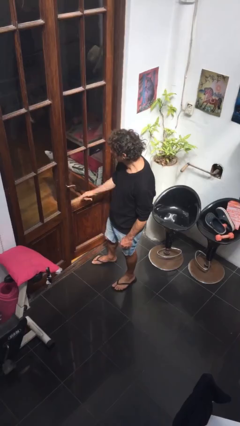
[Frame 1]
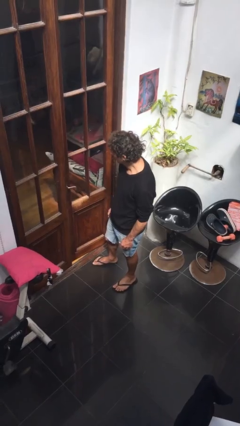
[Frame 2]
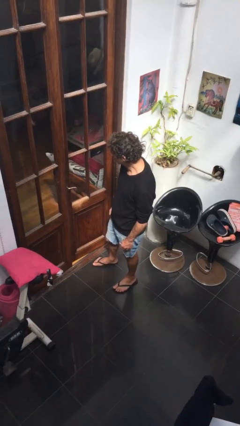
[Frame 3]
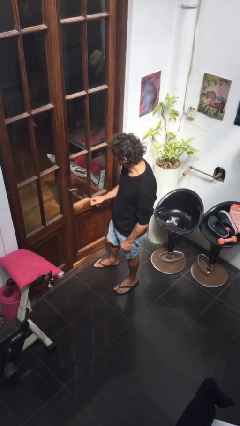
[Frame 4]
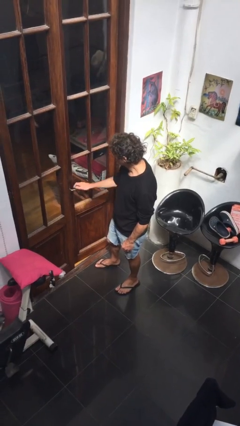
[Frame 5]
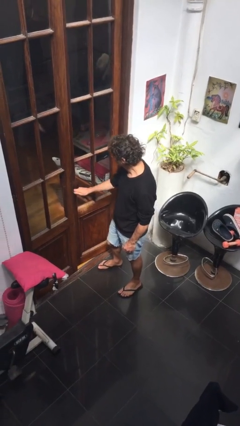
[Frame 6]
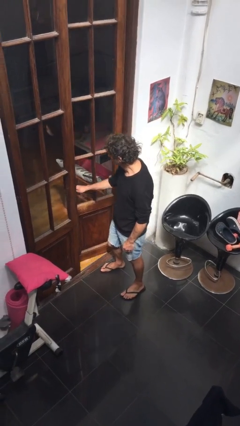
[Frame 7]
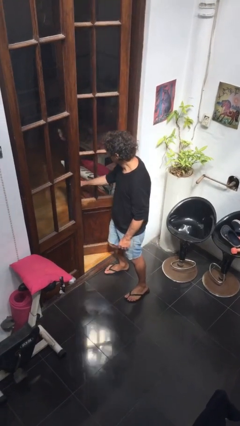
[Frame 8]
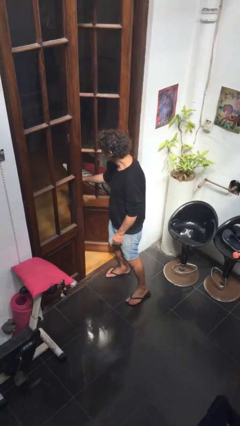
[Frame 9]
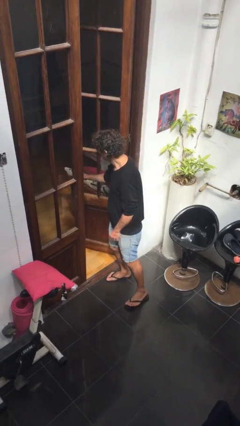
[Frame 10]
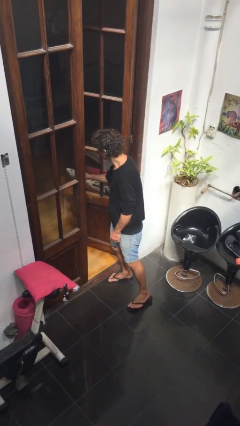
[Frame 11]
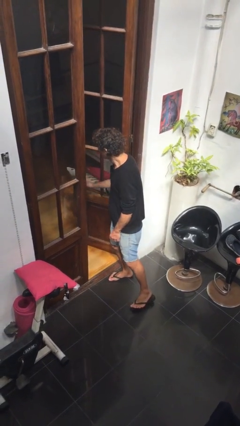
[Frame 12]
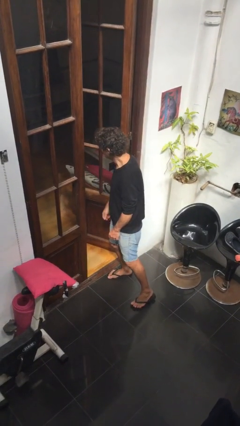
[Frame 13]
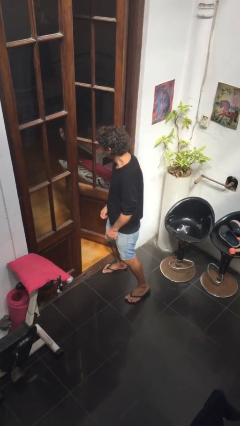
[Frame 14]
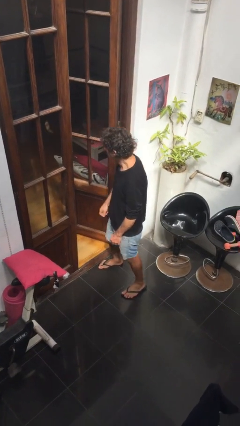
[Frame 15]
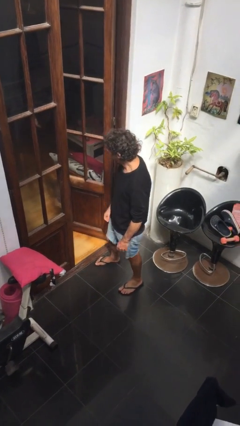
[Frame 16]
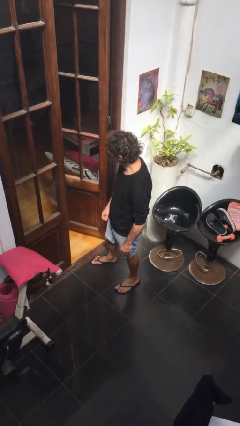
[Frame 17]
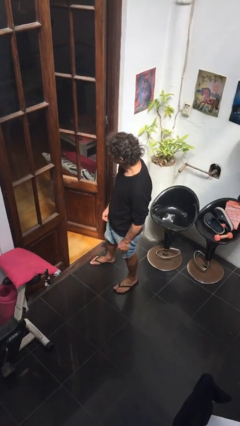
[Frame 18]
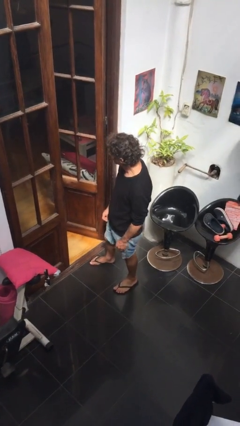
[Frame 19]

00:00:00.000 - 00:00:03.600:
person opens facility door

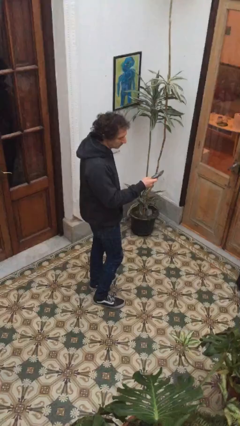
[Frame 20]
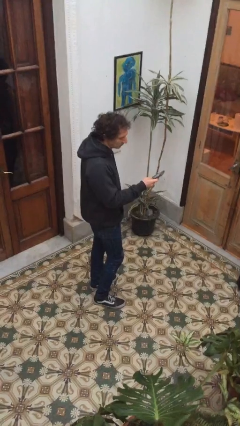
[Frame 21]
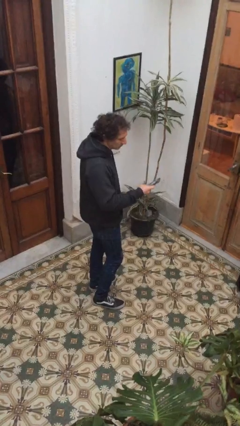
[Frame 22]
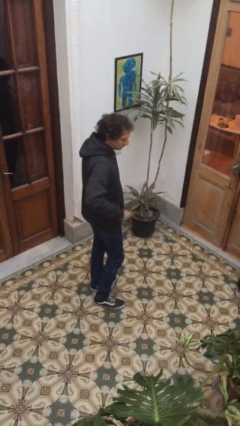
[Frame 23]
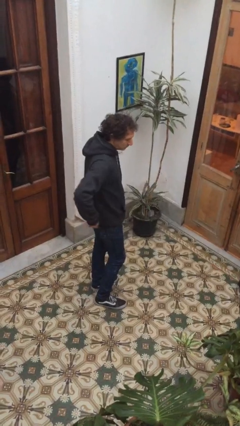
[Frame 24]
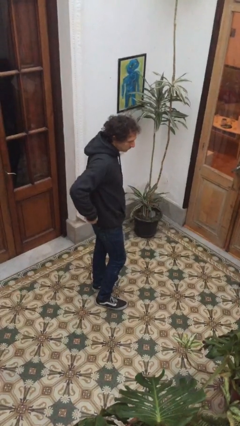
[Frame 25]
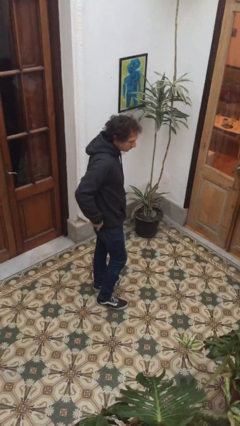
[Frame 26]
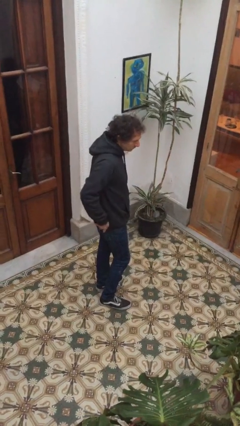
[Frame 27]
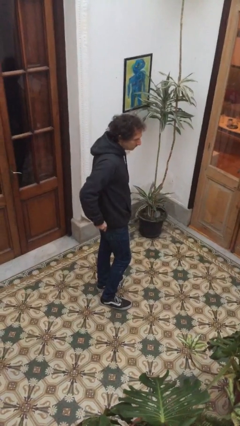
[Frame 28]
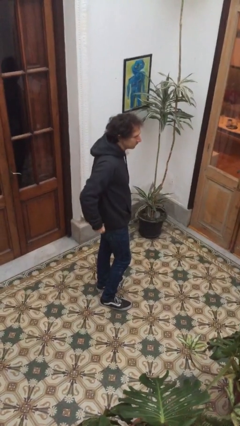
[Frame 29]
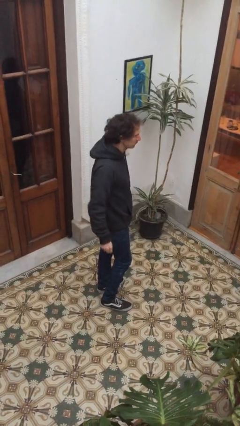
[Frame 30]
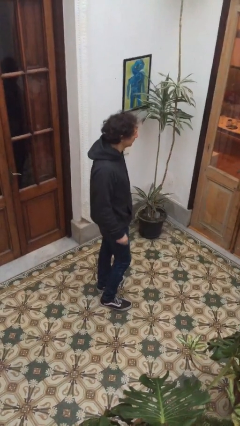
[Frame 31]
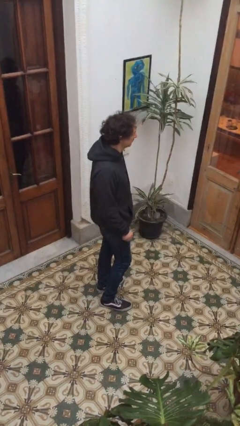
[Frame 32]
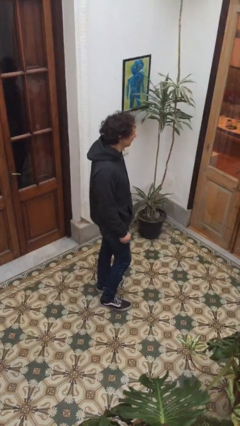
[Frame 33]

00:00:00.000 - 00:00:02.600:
person puts phone into pocket

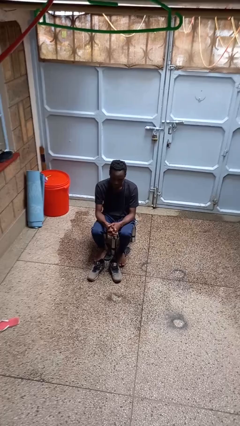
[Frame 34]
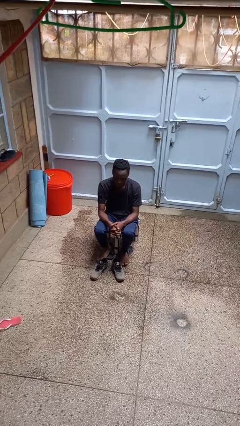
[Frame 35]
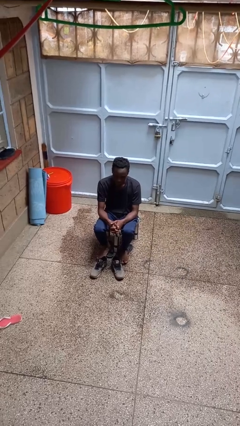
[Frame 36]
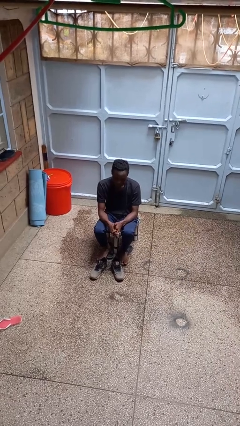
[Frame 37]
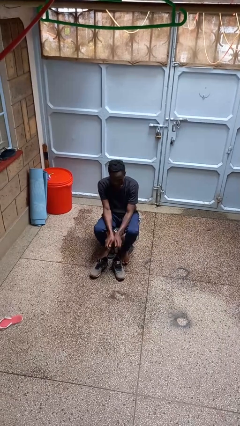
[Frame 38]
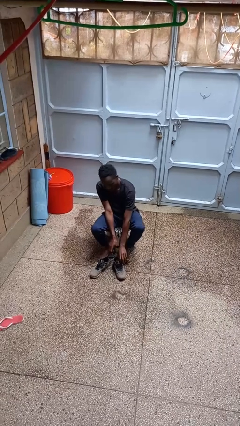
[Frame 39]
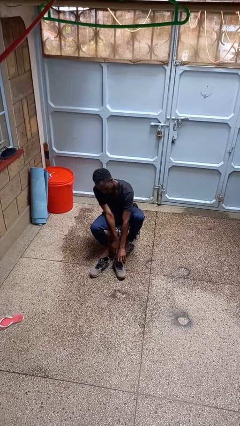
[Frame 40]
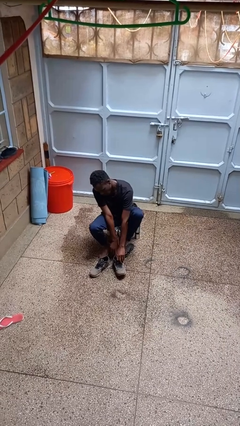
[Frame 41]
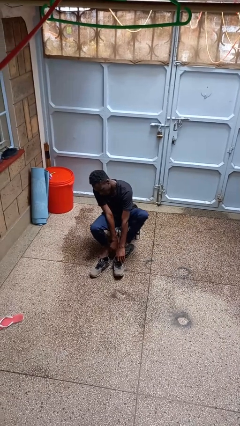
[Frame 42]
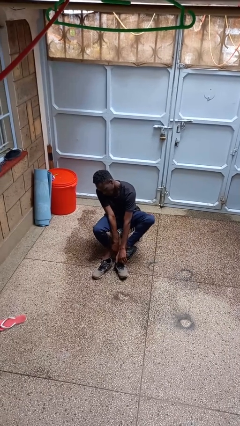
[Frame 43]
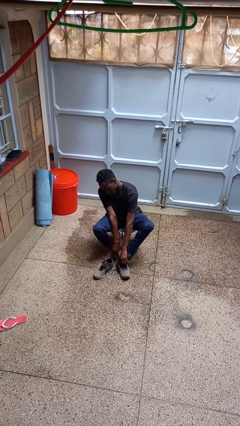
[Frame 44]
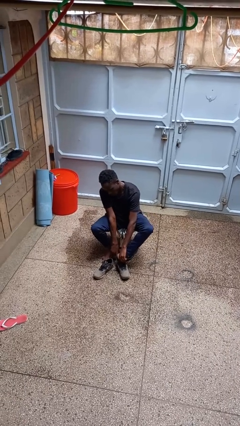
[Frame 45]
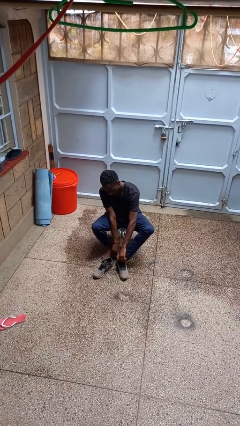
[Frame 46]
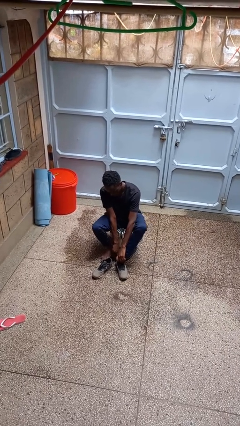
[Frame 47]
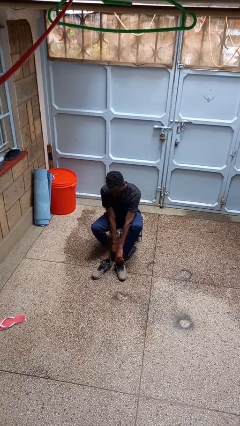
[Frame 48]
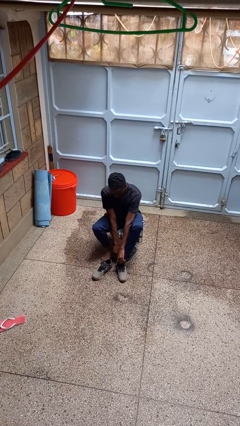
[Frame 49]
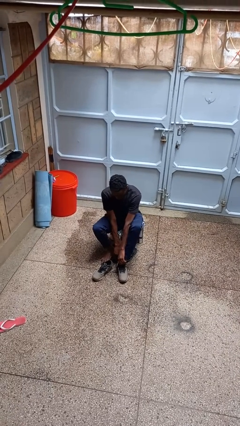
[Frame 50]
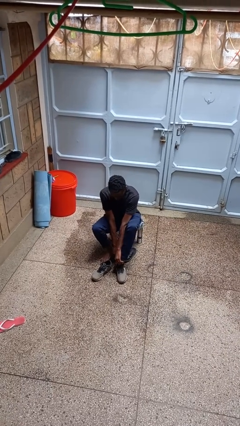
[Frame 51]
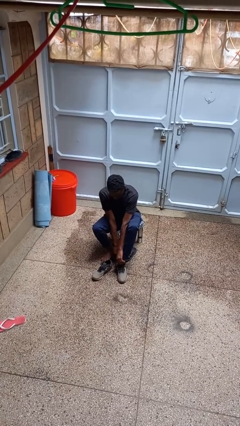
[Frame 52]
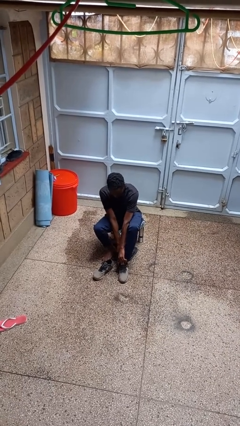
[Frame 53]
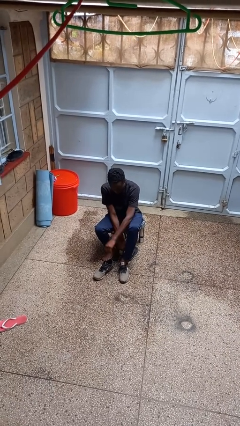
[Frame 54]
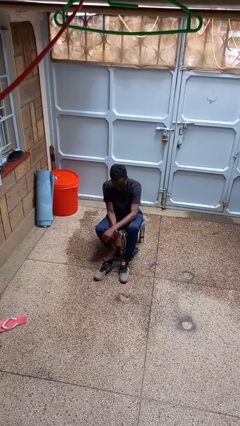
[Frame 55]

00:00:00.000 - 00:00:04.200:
person puts on shoes

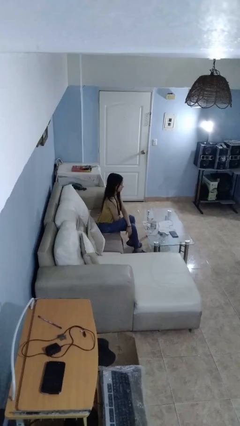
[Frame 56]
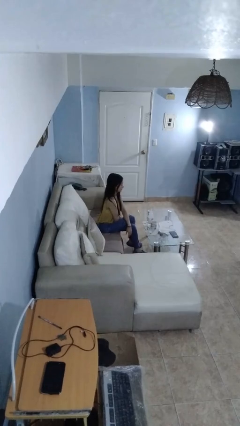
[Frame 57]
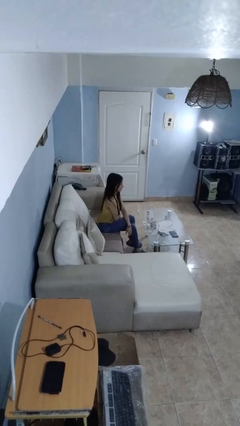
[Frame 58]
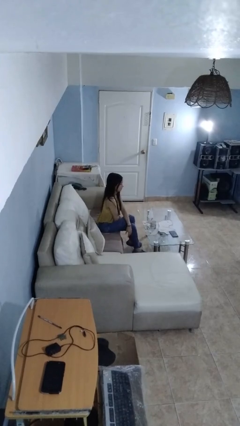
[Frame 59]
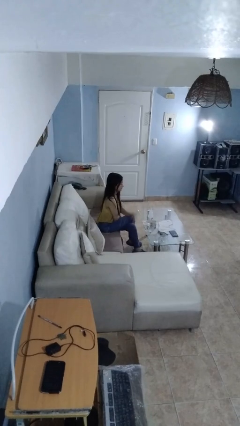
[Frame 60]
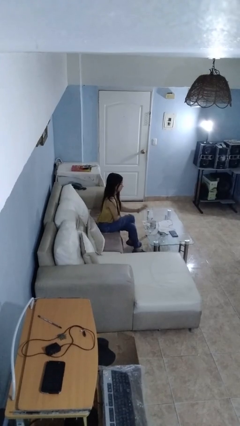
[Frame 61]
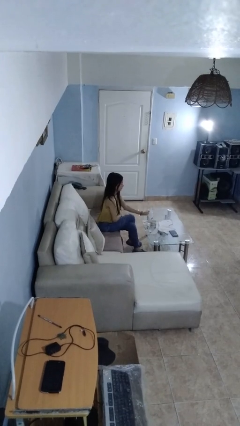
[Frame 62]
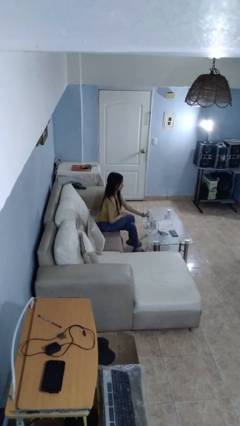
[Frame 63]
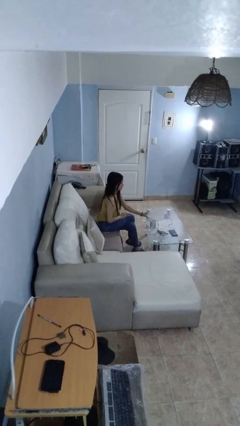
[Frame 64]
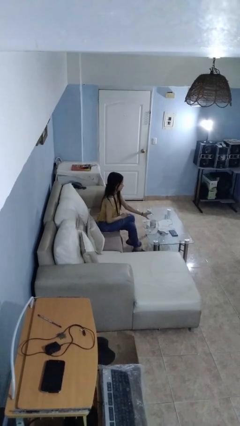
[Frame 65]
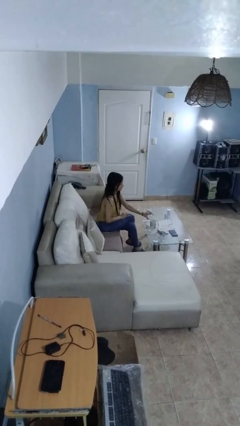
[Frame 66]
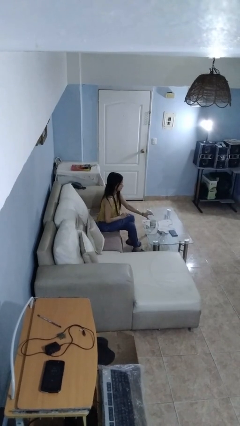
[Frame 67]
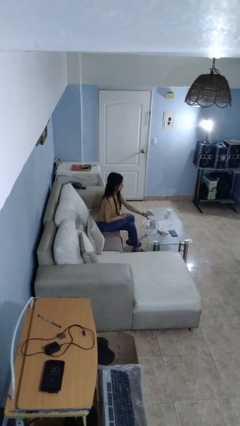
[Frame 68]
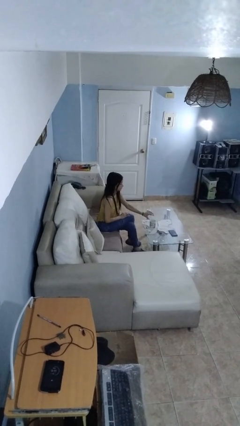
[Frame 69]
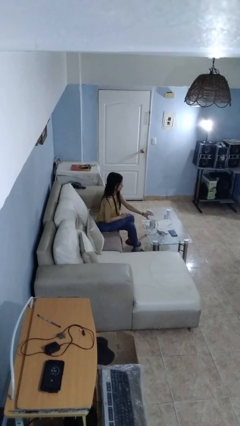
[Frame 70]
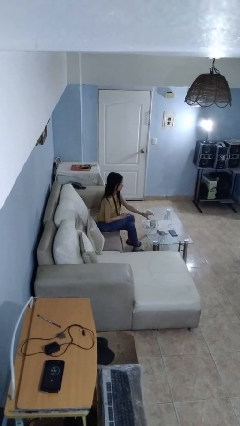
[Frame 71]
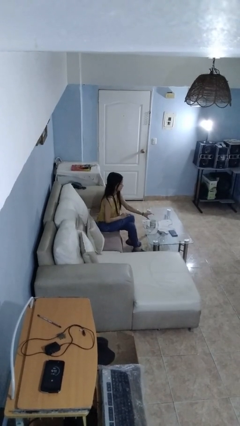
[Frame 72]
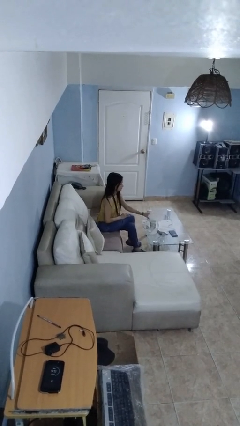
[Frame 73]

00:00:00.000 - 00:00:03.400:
person pours liquid into cup

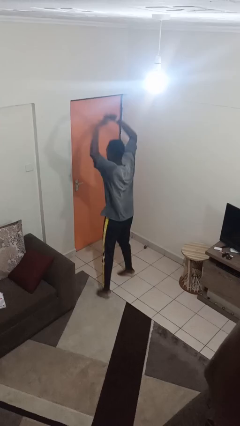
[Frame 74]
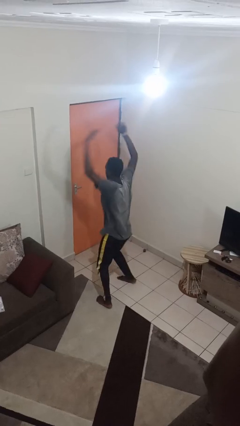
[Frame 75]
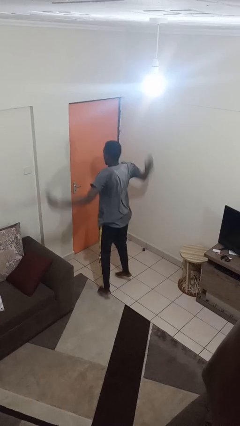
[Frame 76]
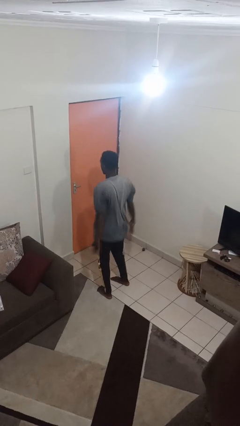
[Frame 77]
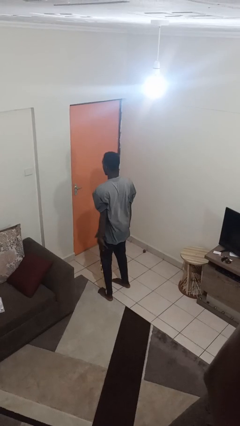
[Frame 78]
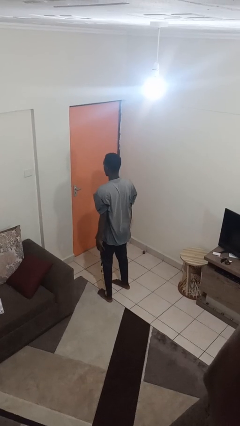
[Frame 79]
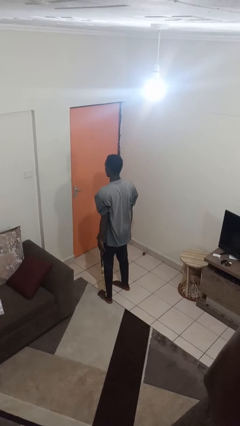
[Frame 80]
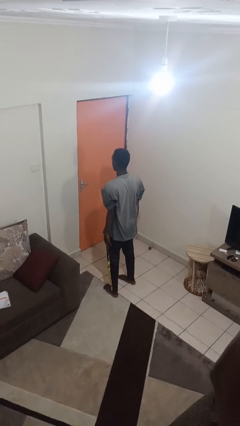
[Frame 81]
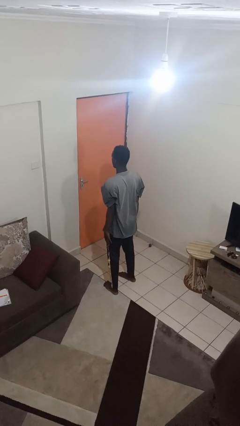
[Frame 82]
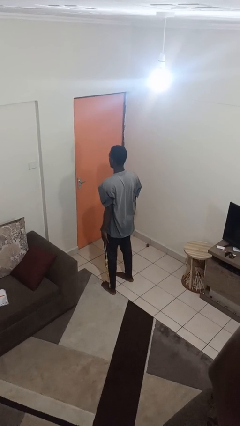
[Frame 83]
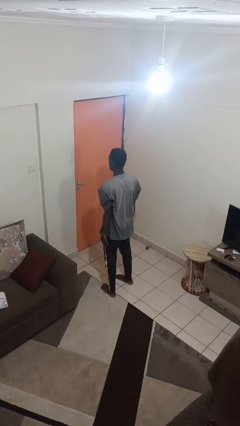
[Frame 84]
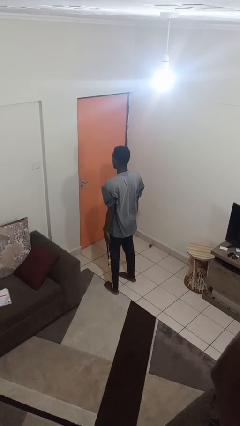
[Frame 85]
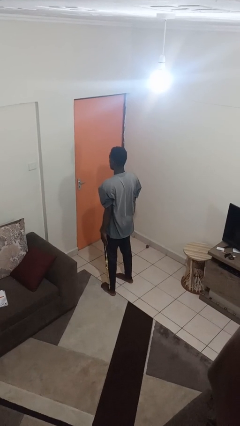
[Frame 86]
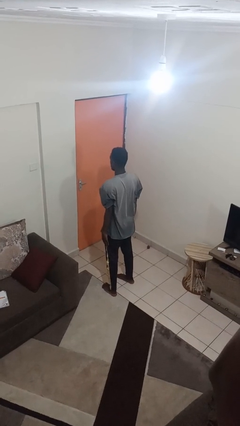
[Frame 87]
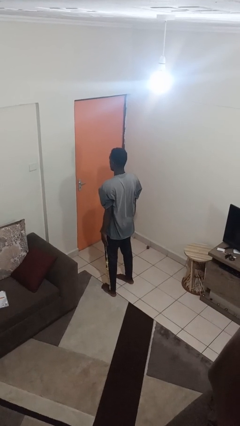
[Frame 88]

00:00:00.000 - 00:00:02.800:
person exercises with jumping jacks

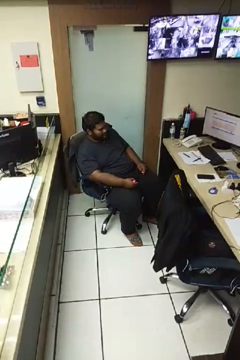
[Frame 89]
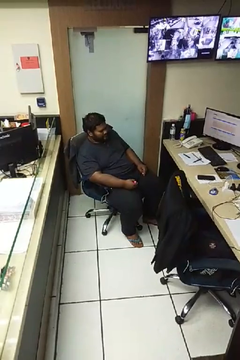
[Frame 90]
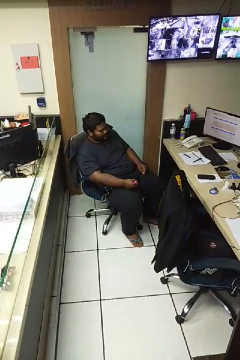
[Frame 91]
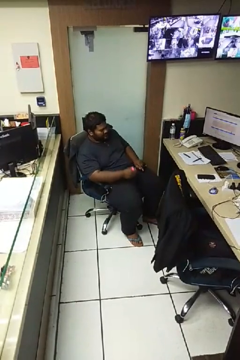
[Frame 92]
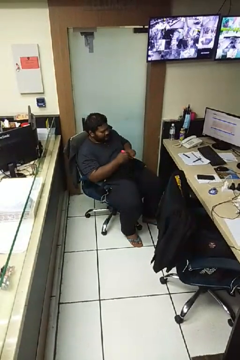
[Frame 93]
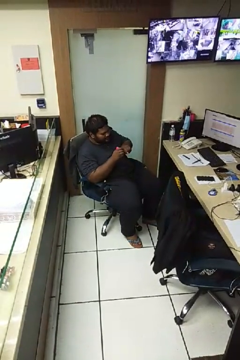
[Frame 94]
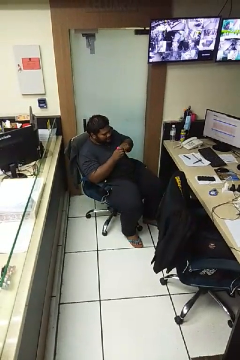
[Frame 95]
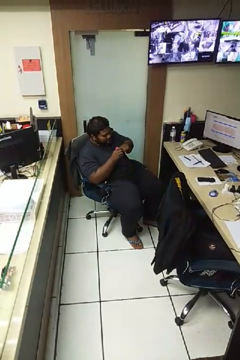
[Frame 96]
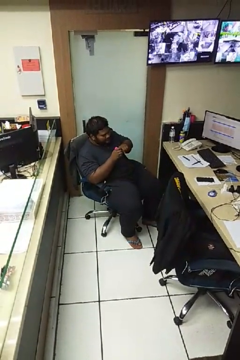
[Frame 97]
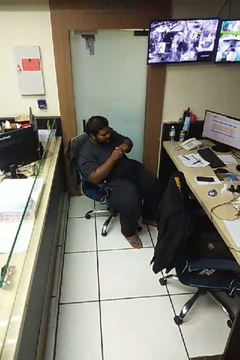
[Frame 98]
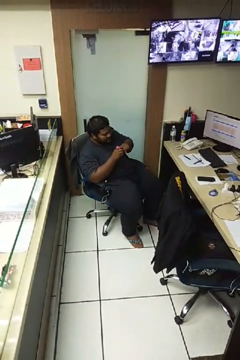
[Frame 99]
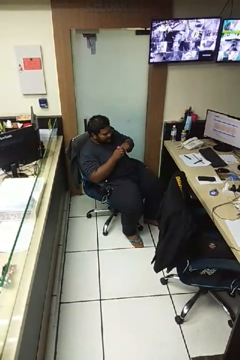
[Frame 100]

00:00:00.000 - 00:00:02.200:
person paints fingernails
